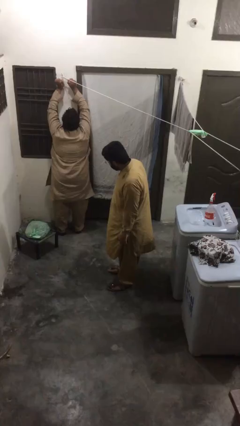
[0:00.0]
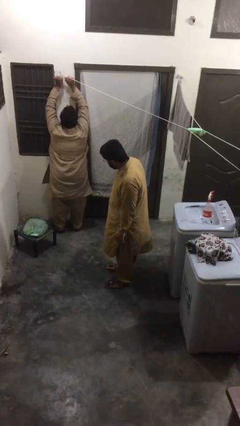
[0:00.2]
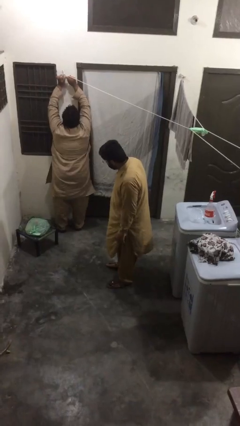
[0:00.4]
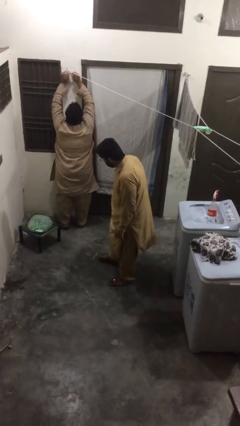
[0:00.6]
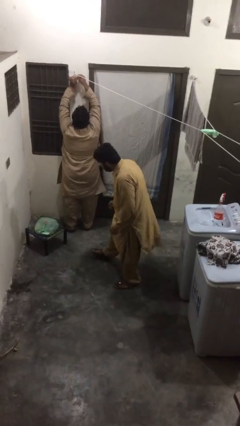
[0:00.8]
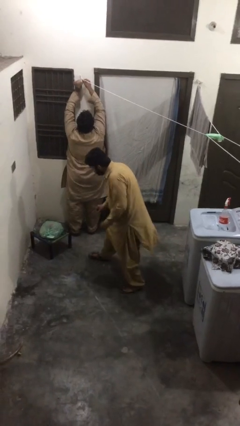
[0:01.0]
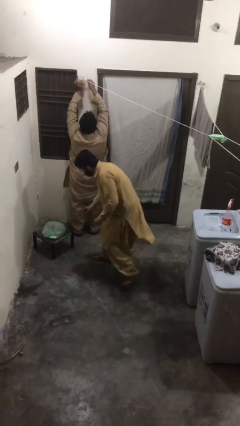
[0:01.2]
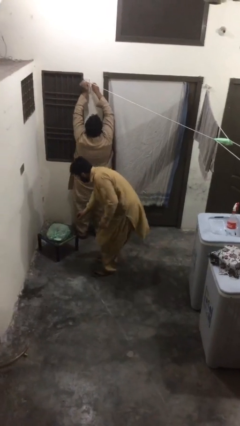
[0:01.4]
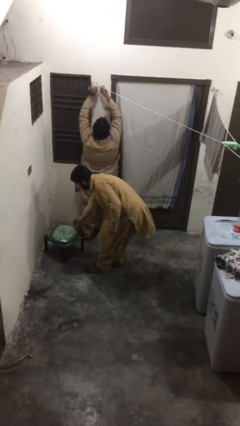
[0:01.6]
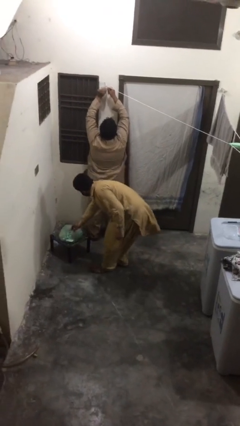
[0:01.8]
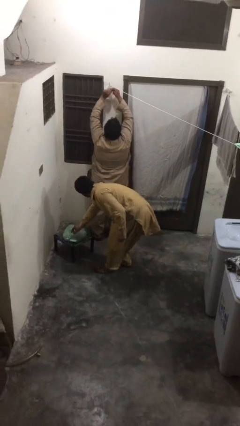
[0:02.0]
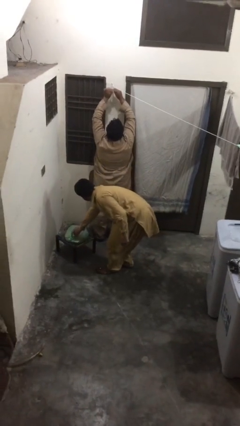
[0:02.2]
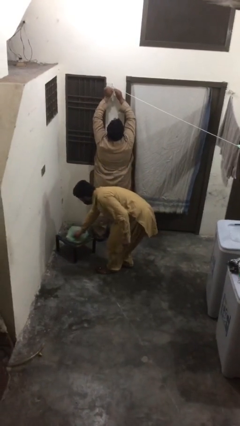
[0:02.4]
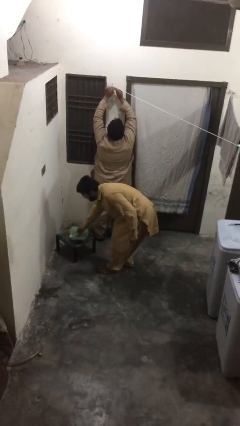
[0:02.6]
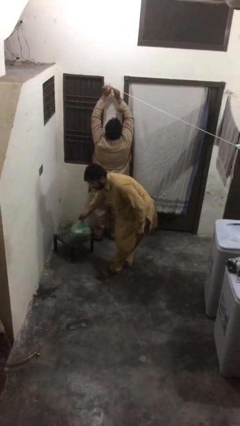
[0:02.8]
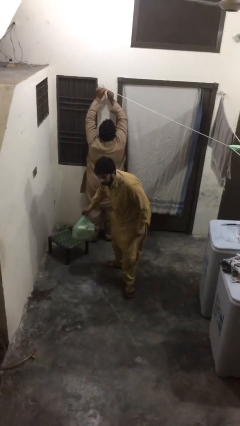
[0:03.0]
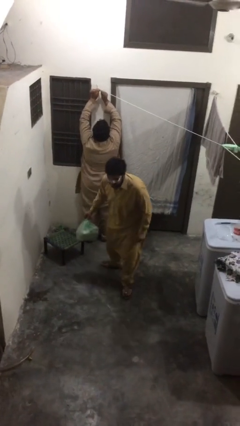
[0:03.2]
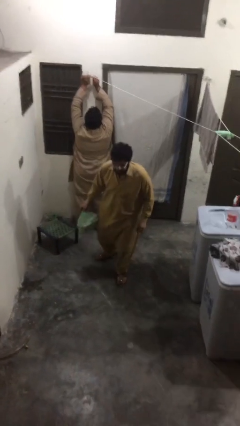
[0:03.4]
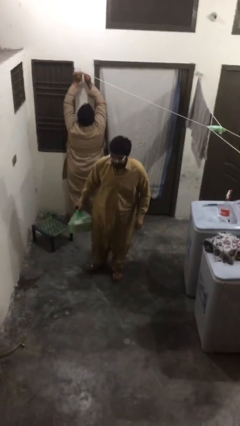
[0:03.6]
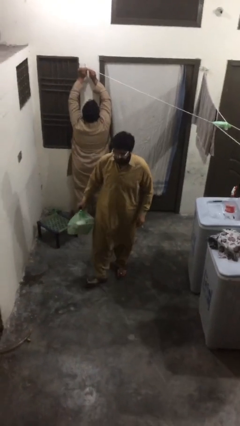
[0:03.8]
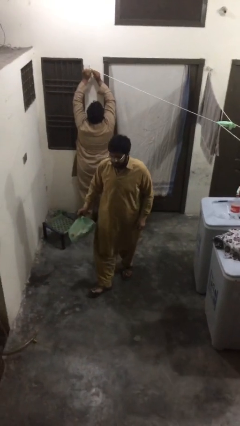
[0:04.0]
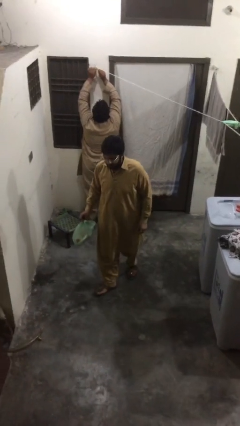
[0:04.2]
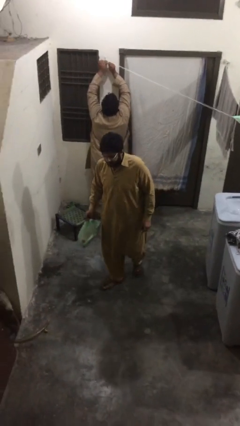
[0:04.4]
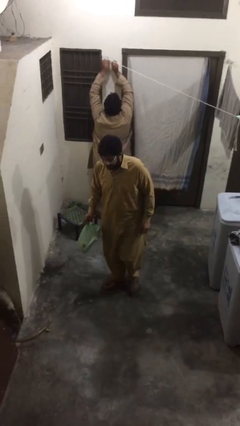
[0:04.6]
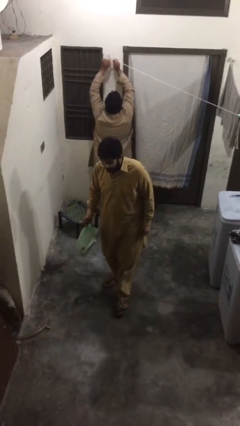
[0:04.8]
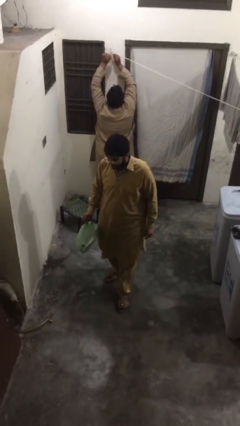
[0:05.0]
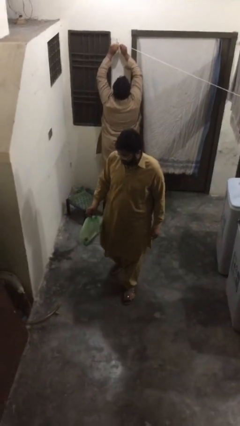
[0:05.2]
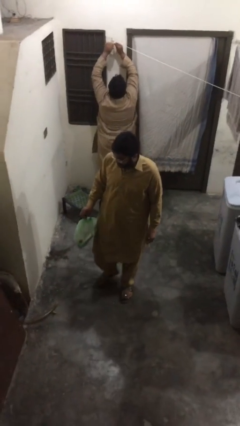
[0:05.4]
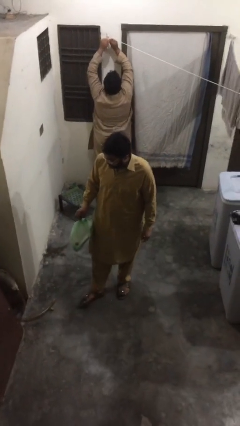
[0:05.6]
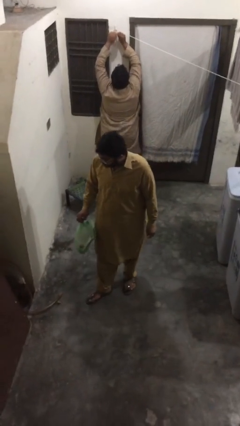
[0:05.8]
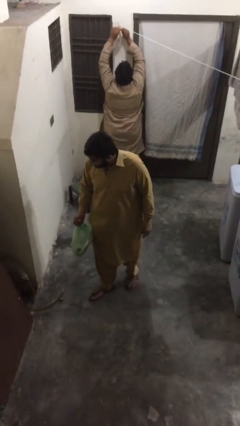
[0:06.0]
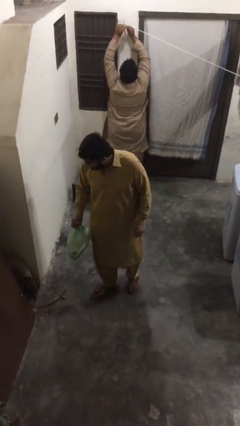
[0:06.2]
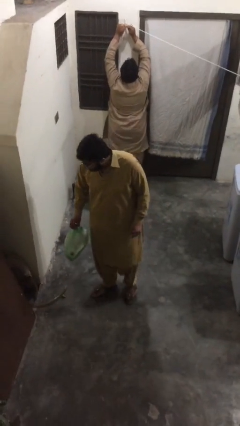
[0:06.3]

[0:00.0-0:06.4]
person steals object from person

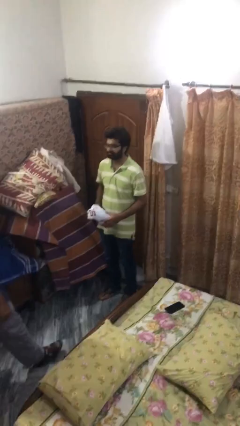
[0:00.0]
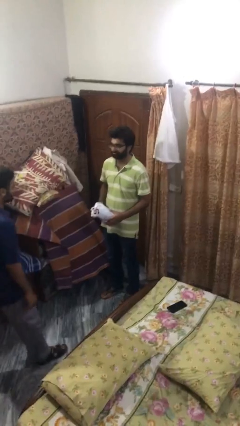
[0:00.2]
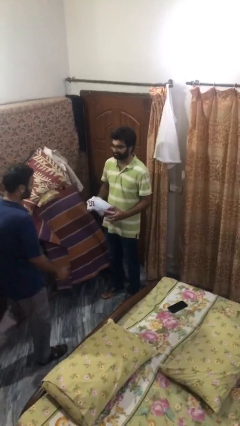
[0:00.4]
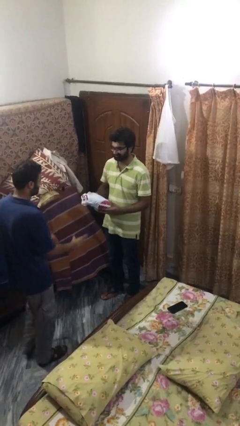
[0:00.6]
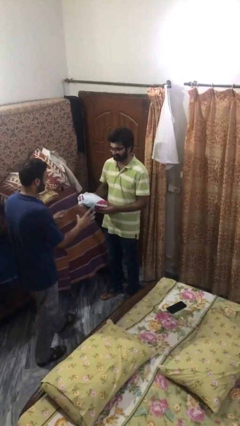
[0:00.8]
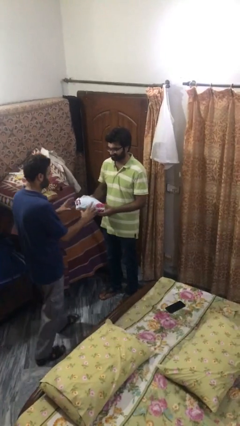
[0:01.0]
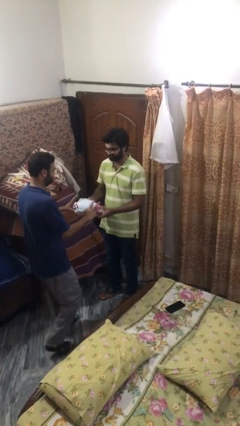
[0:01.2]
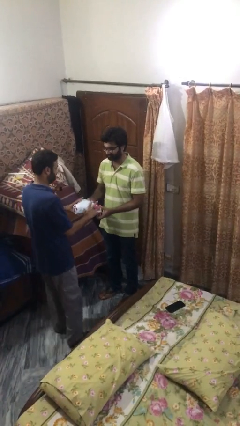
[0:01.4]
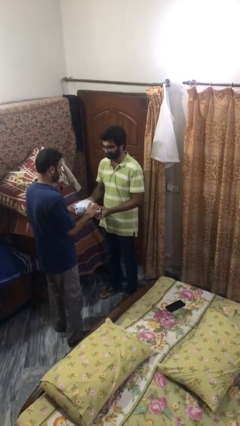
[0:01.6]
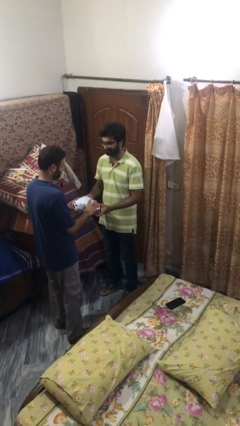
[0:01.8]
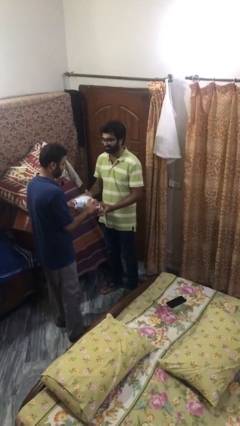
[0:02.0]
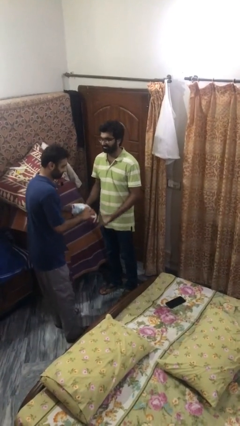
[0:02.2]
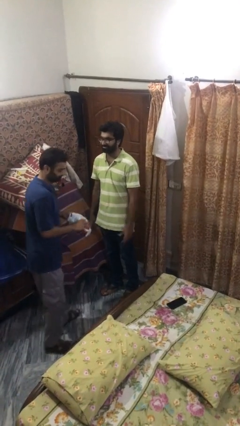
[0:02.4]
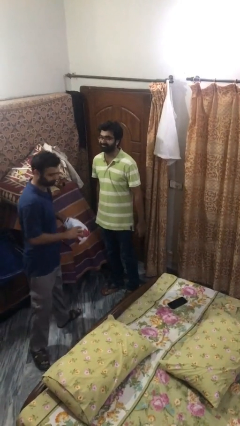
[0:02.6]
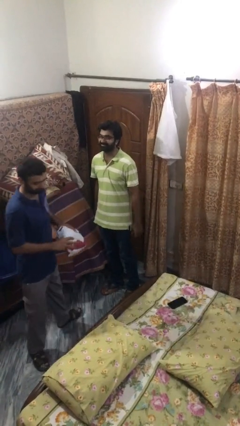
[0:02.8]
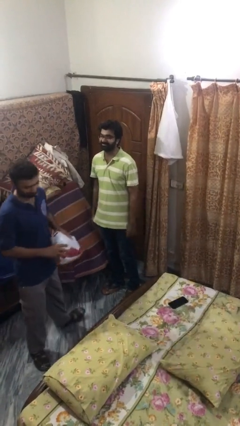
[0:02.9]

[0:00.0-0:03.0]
person transfers object to person

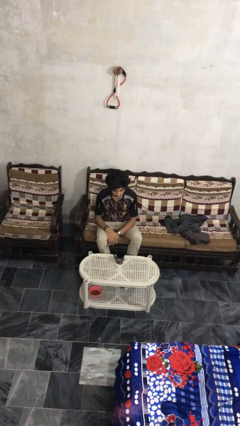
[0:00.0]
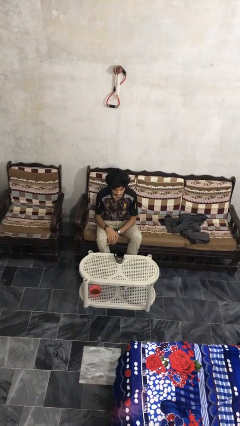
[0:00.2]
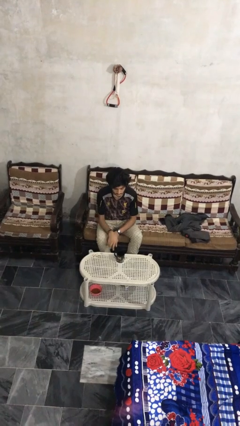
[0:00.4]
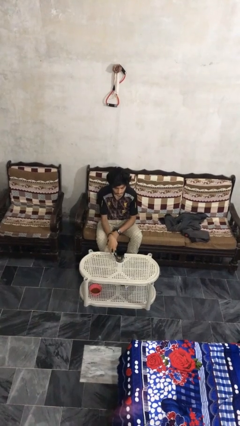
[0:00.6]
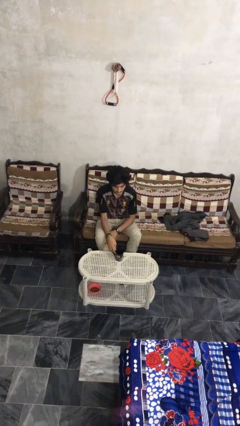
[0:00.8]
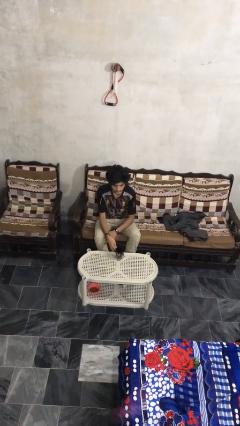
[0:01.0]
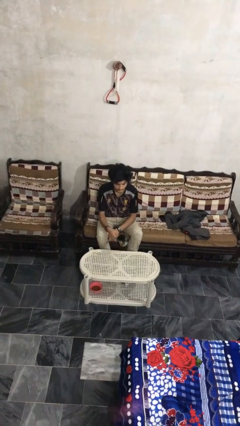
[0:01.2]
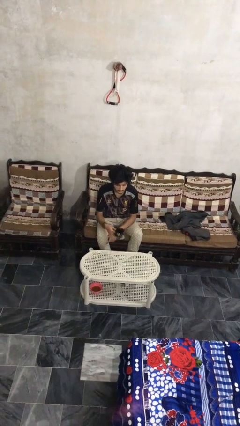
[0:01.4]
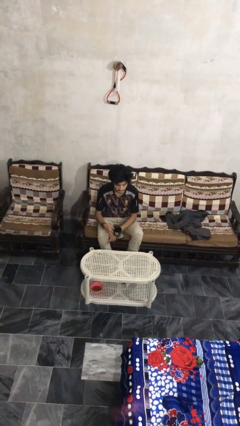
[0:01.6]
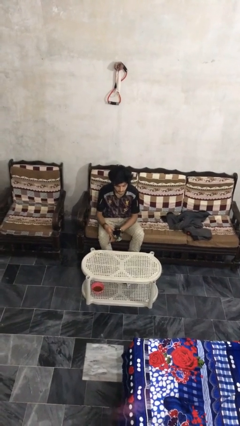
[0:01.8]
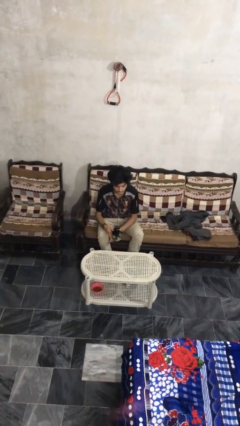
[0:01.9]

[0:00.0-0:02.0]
person picks up object from table

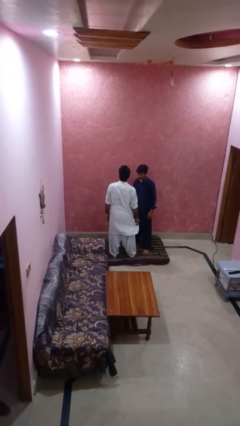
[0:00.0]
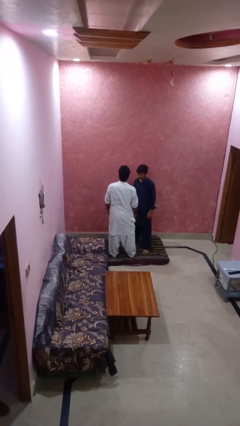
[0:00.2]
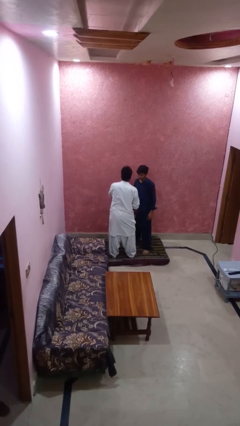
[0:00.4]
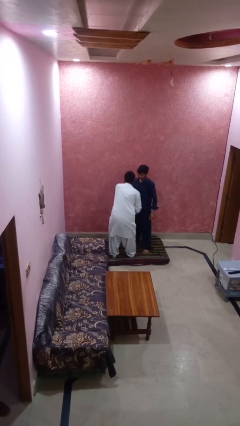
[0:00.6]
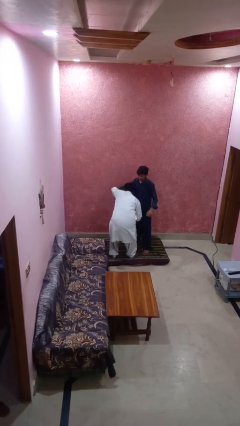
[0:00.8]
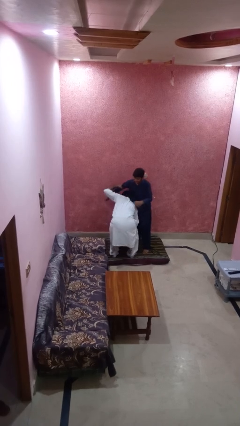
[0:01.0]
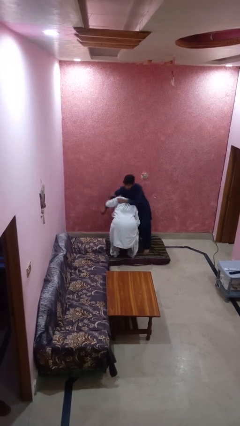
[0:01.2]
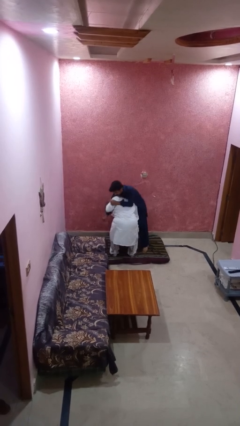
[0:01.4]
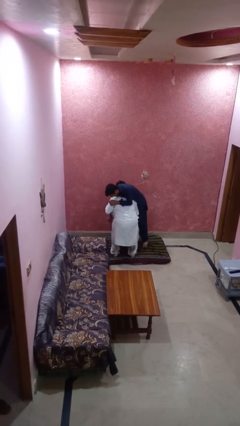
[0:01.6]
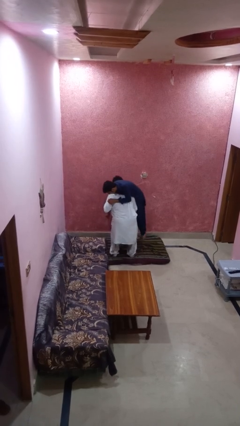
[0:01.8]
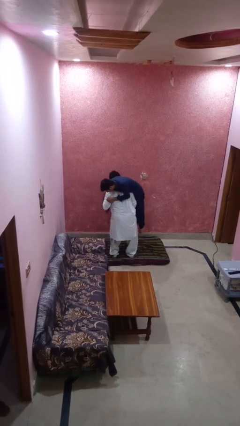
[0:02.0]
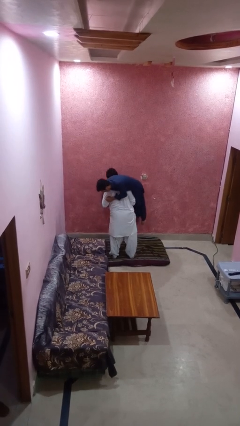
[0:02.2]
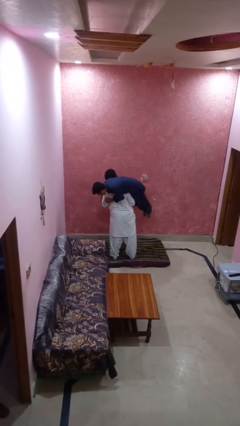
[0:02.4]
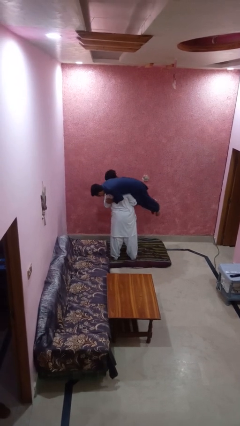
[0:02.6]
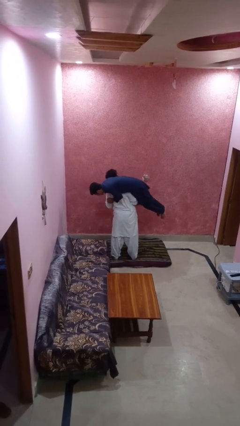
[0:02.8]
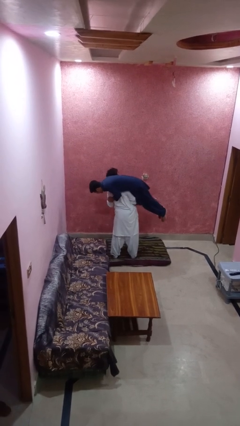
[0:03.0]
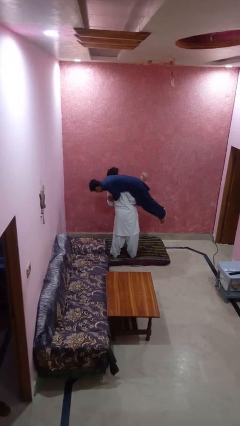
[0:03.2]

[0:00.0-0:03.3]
person carries person over shoulder

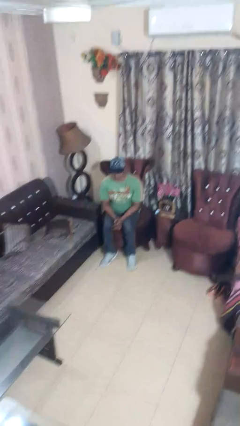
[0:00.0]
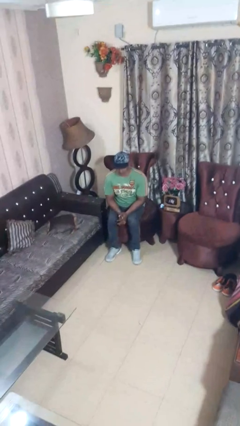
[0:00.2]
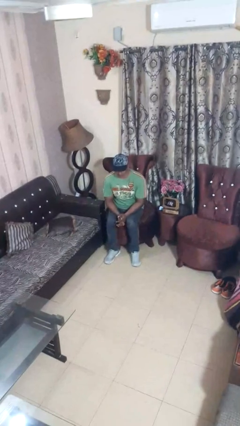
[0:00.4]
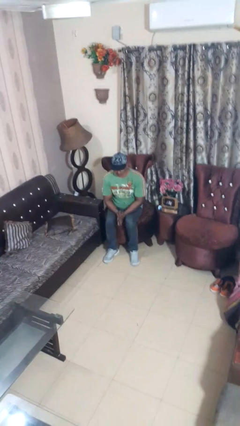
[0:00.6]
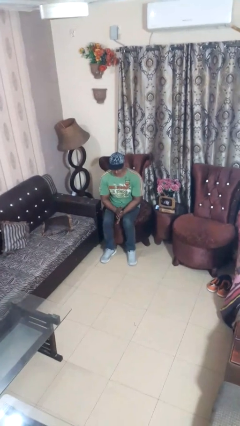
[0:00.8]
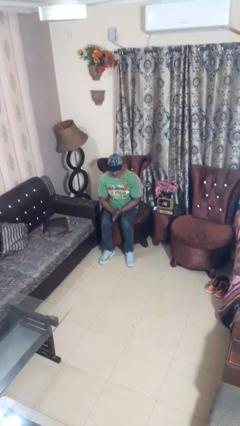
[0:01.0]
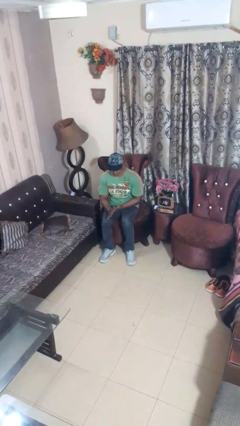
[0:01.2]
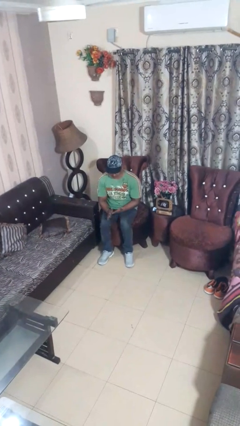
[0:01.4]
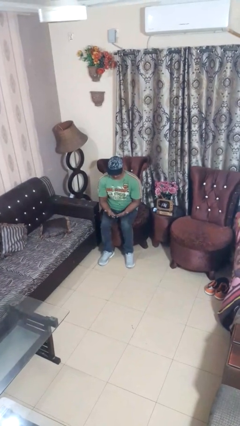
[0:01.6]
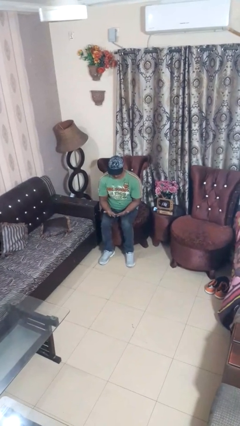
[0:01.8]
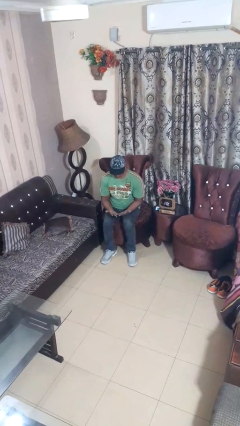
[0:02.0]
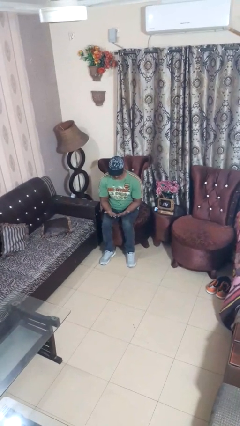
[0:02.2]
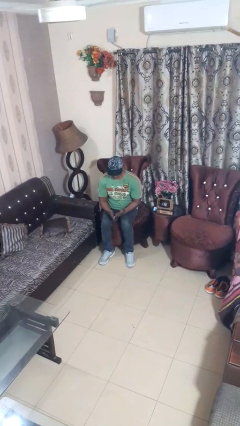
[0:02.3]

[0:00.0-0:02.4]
person looks at hands in lap

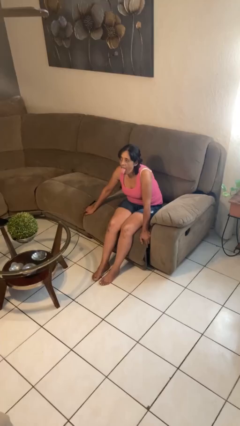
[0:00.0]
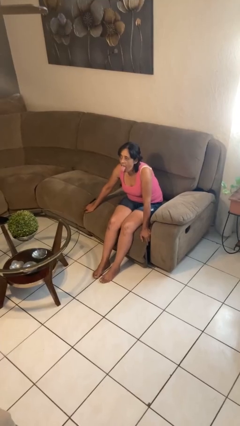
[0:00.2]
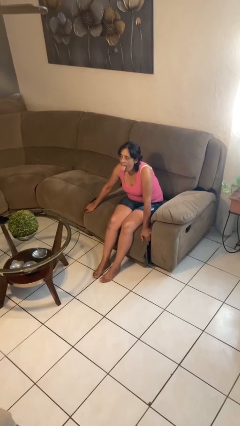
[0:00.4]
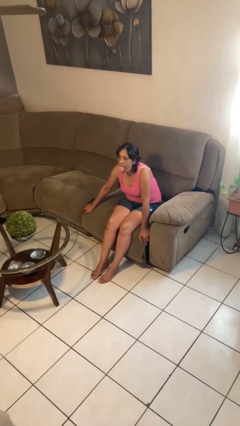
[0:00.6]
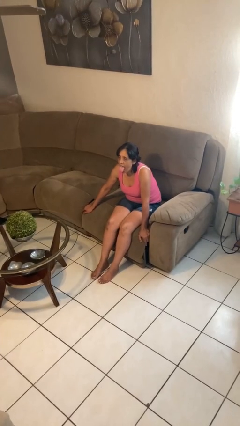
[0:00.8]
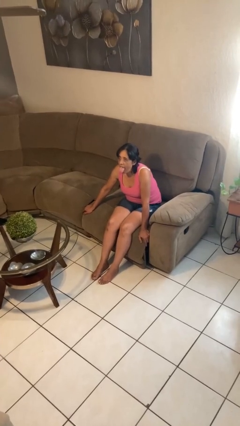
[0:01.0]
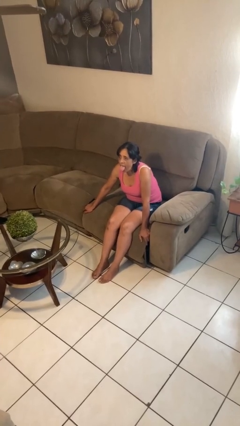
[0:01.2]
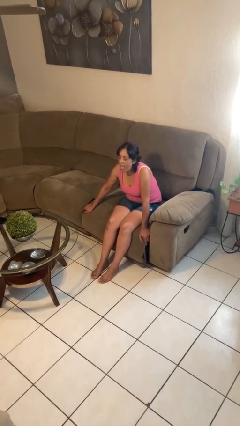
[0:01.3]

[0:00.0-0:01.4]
person sticks out tongue
